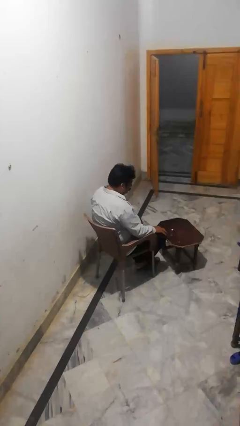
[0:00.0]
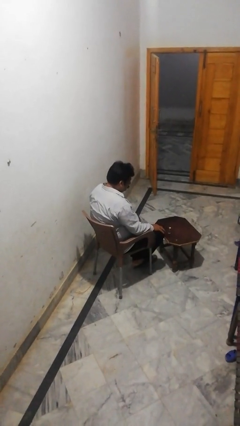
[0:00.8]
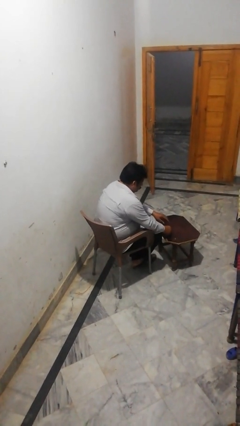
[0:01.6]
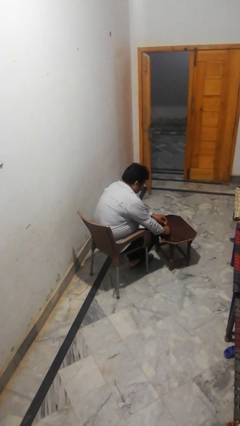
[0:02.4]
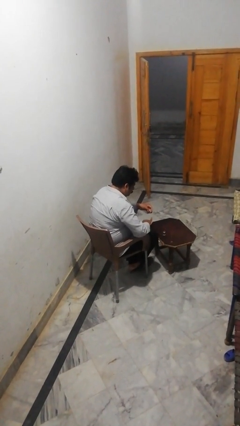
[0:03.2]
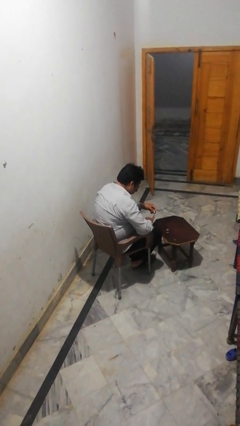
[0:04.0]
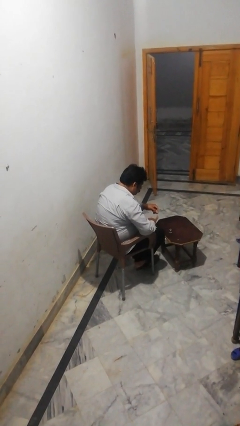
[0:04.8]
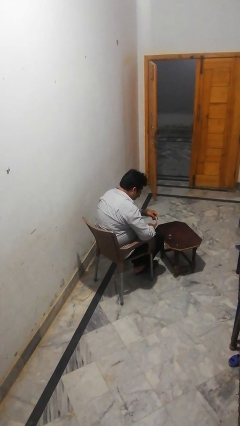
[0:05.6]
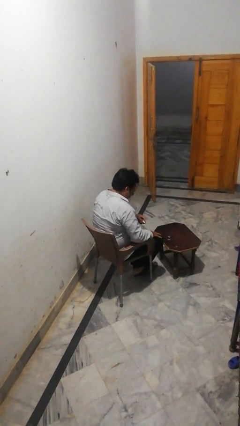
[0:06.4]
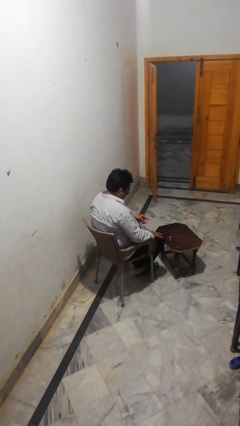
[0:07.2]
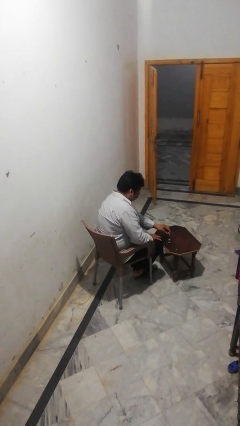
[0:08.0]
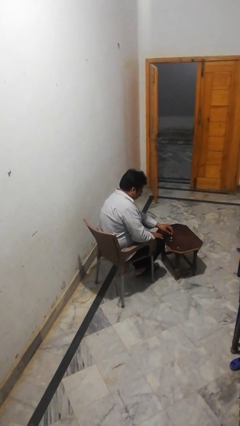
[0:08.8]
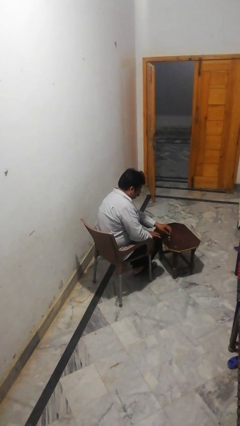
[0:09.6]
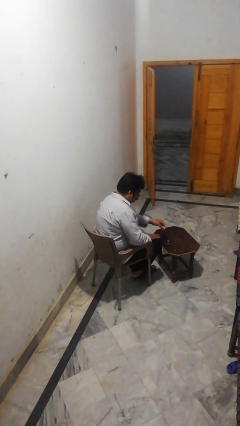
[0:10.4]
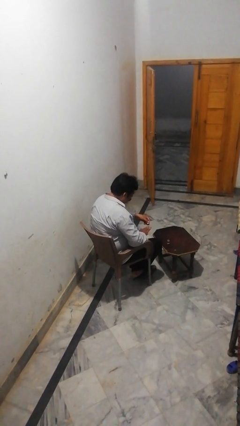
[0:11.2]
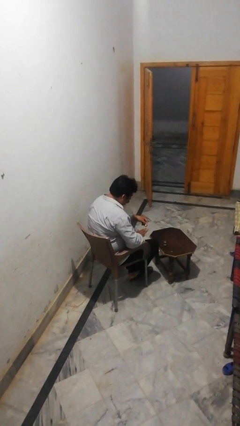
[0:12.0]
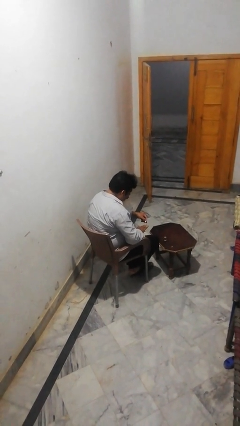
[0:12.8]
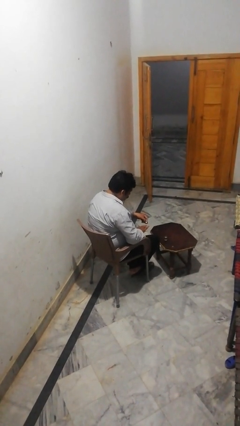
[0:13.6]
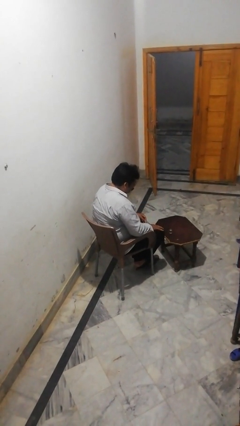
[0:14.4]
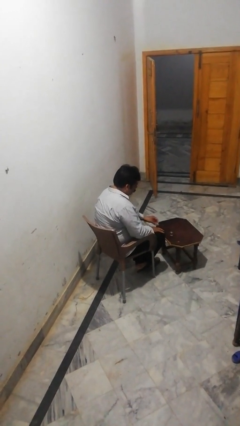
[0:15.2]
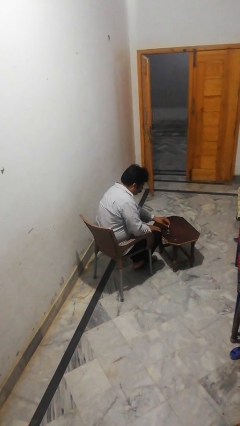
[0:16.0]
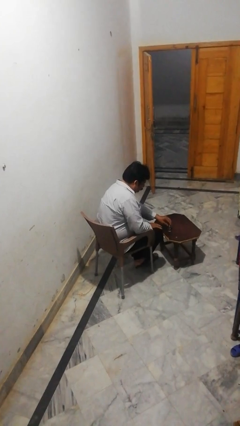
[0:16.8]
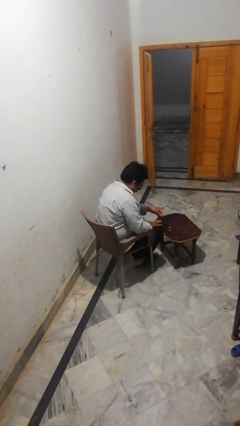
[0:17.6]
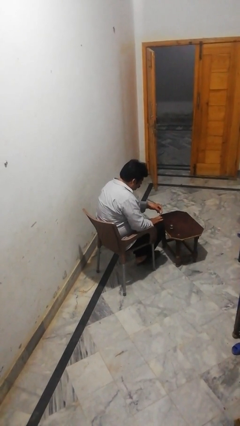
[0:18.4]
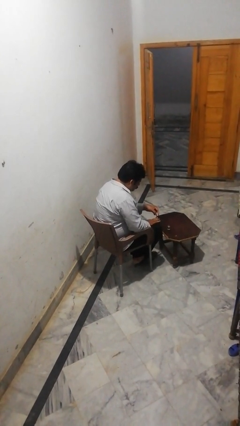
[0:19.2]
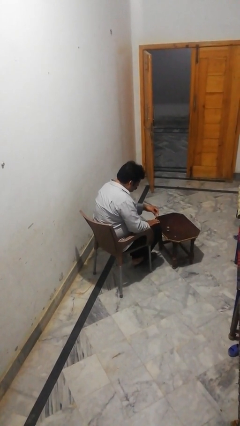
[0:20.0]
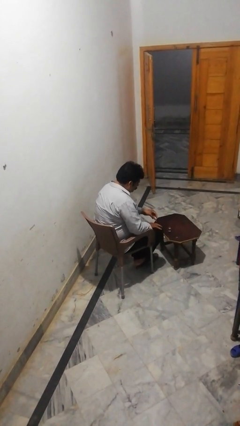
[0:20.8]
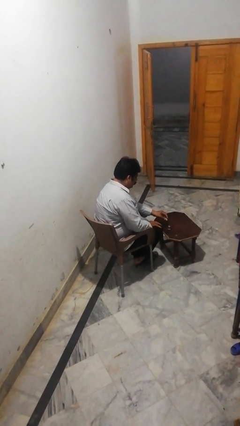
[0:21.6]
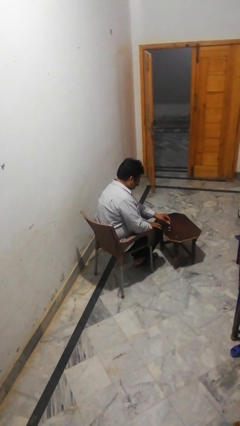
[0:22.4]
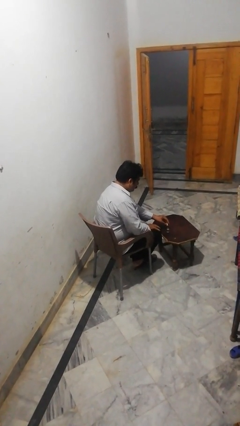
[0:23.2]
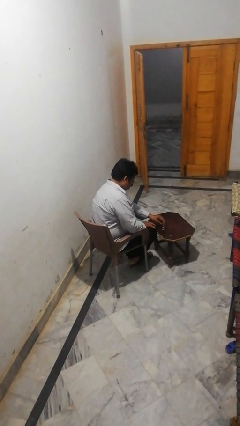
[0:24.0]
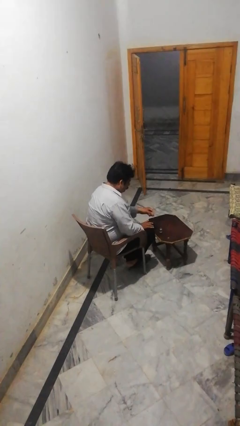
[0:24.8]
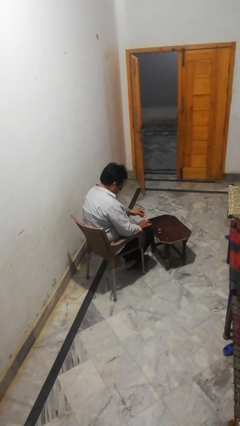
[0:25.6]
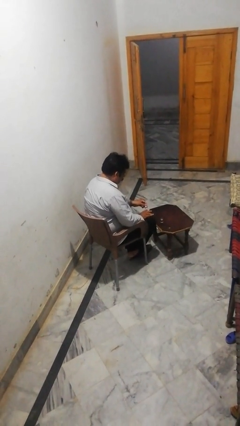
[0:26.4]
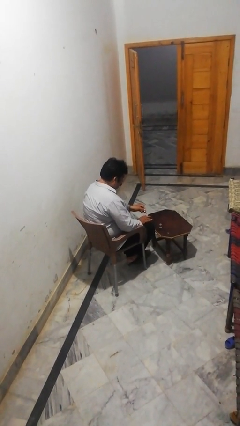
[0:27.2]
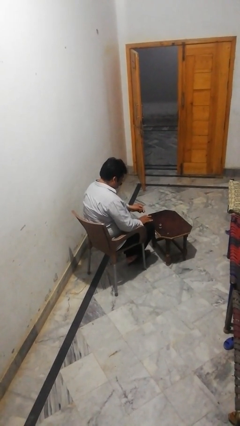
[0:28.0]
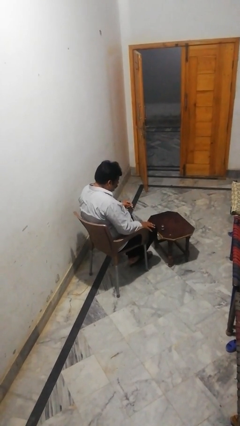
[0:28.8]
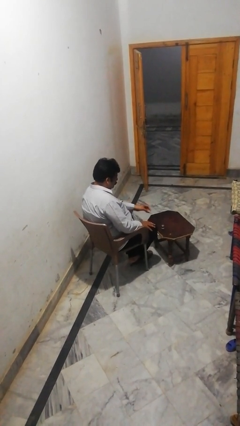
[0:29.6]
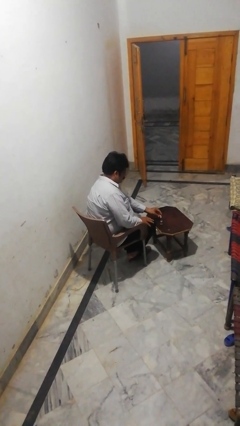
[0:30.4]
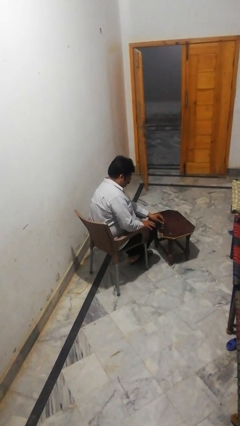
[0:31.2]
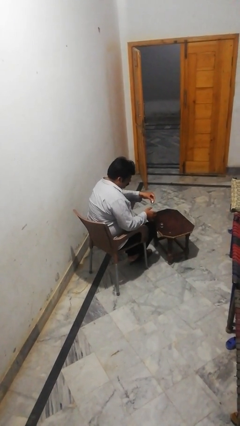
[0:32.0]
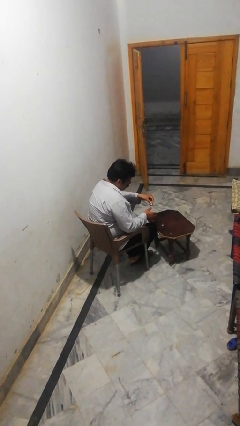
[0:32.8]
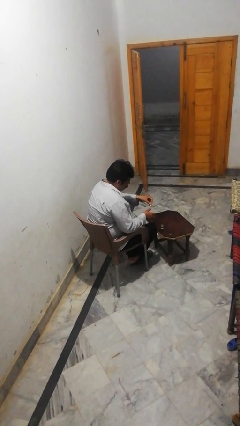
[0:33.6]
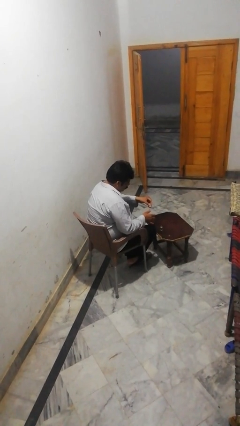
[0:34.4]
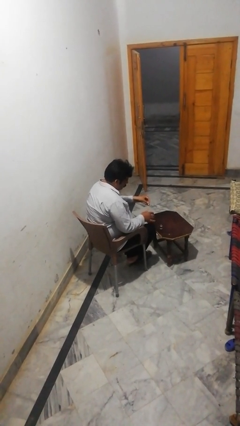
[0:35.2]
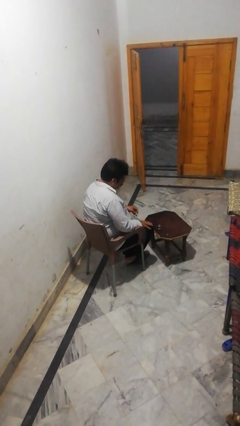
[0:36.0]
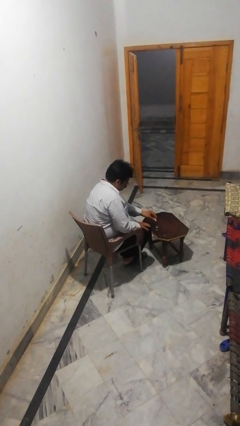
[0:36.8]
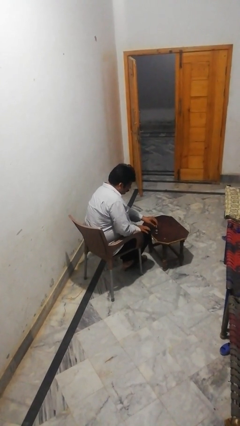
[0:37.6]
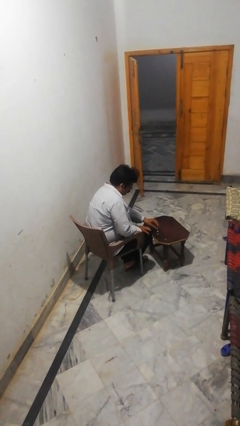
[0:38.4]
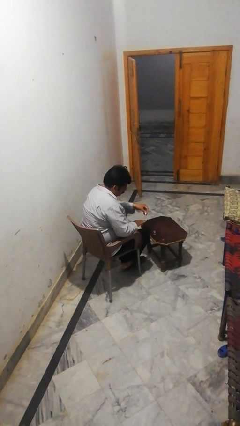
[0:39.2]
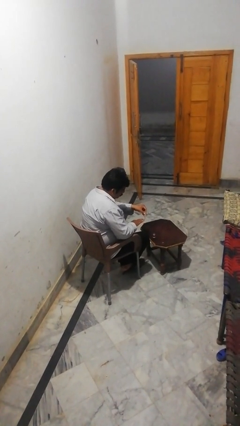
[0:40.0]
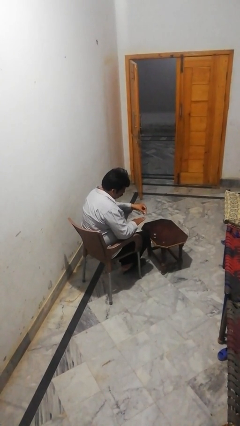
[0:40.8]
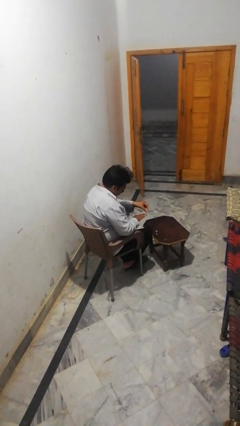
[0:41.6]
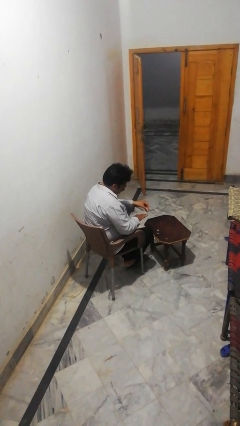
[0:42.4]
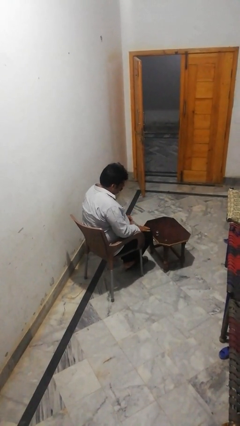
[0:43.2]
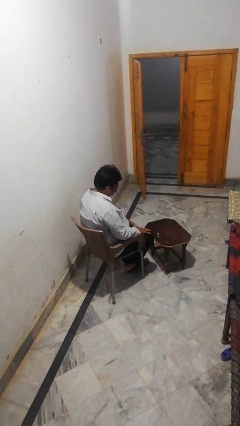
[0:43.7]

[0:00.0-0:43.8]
person paints fingernails

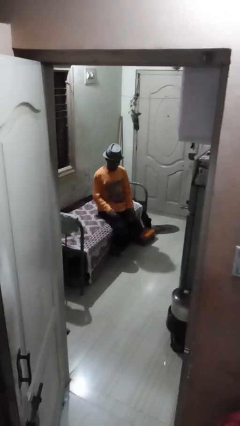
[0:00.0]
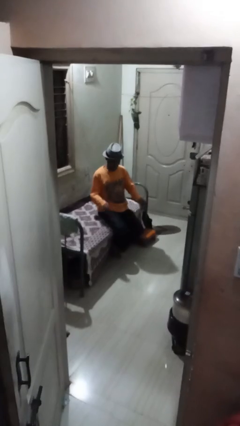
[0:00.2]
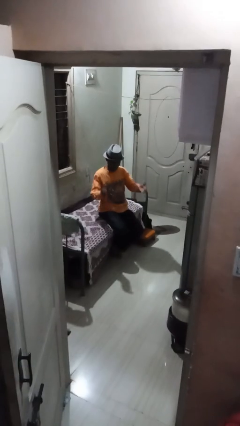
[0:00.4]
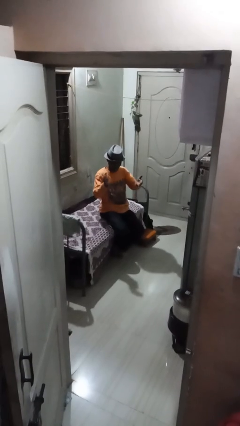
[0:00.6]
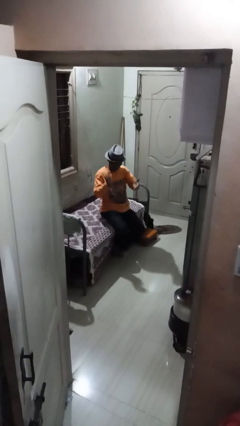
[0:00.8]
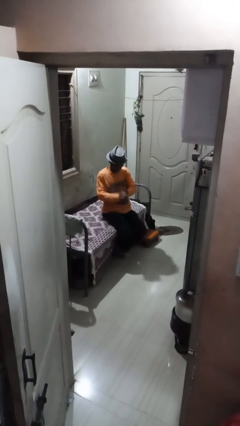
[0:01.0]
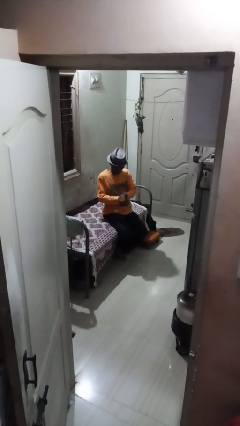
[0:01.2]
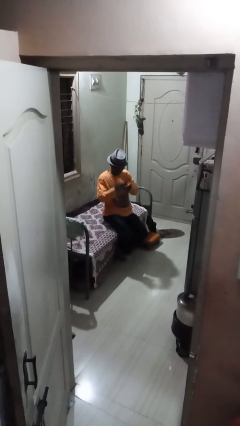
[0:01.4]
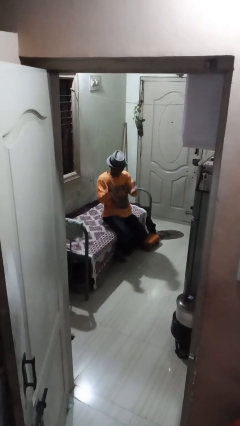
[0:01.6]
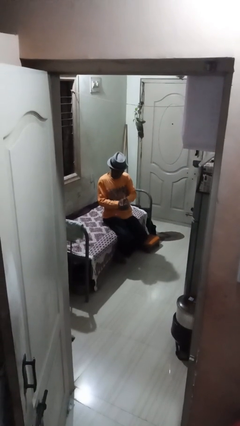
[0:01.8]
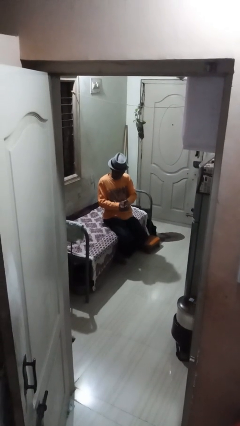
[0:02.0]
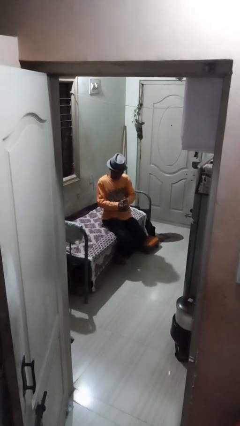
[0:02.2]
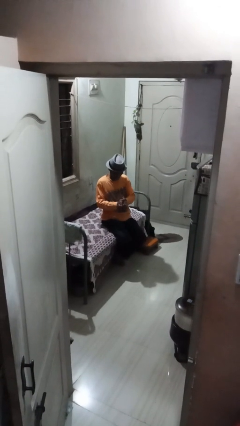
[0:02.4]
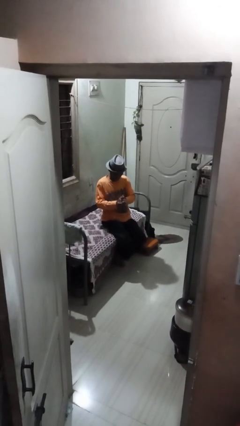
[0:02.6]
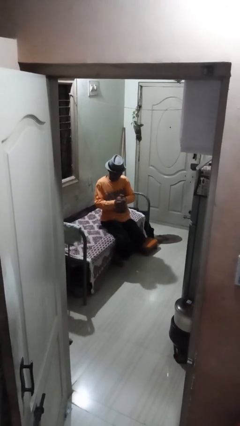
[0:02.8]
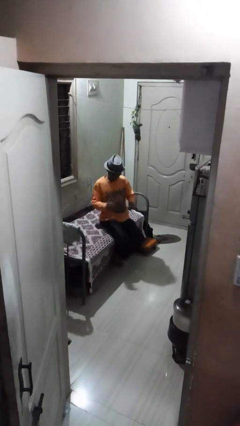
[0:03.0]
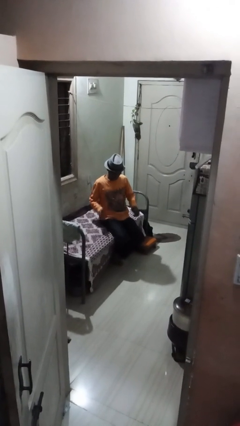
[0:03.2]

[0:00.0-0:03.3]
person claps hands

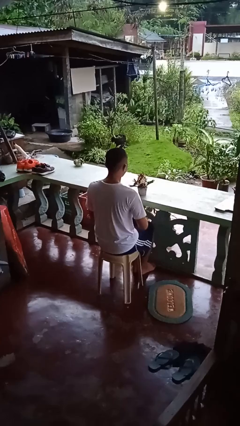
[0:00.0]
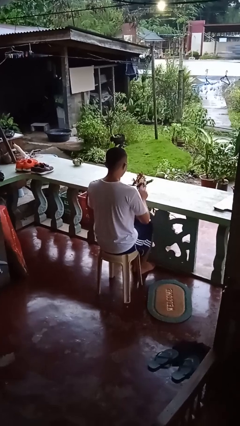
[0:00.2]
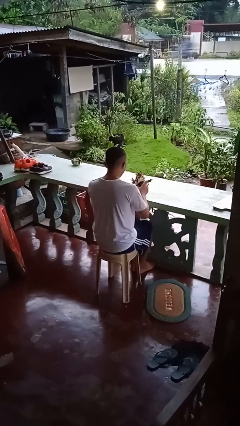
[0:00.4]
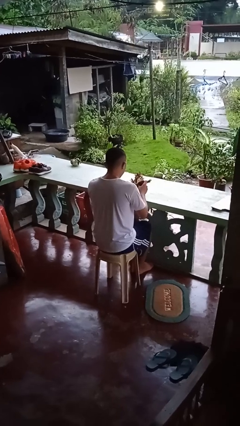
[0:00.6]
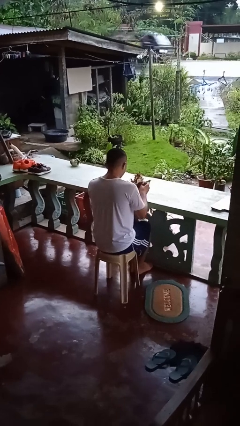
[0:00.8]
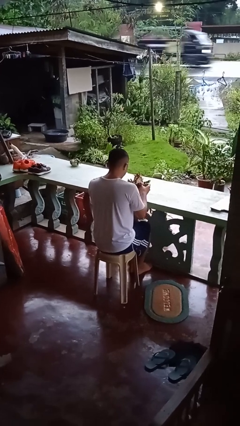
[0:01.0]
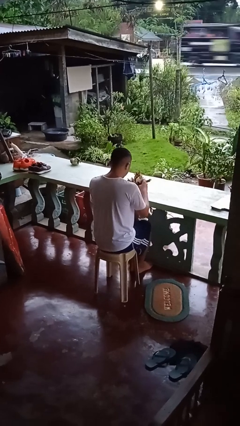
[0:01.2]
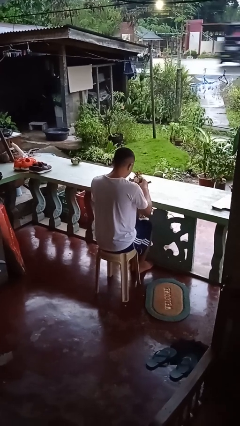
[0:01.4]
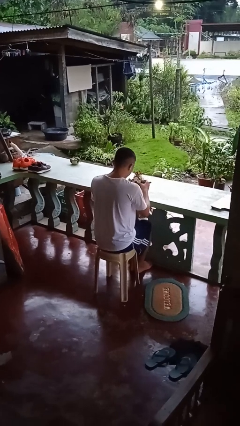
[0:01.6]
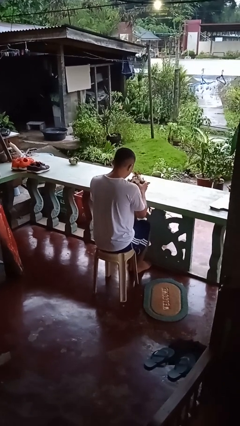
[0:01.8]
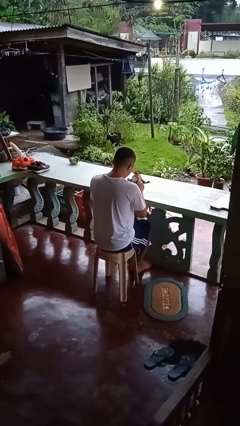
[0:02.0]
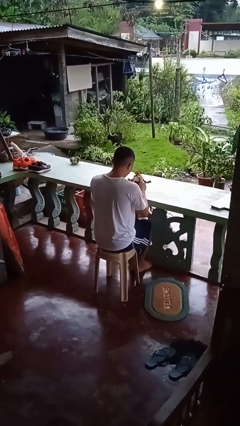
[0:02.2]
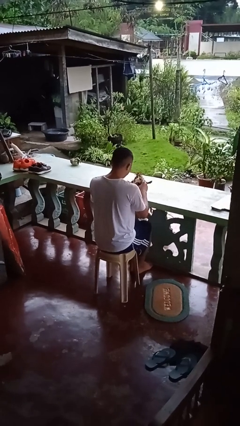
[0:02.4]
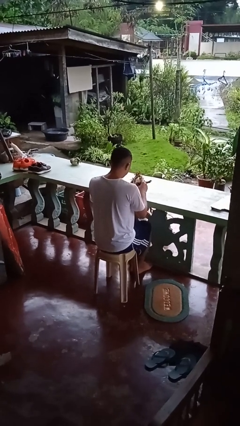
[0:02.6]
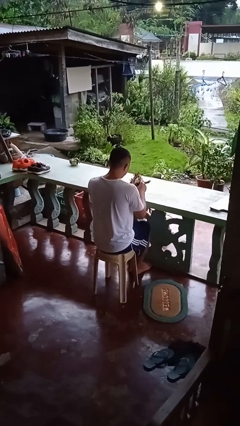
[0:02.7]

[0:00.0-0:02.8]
person arranges flowers in vase

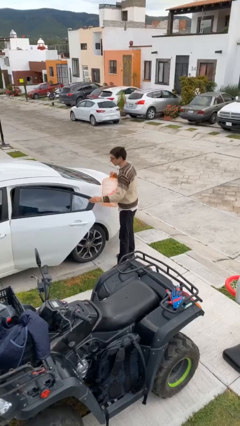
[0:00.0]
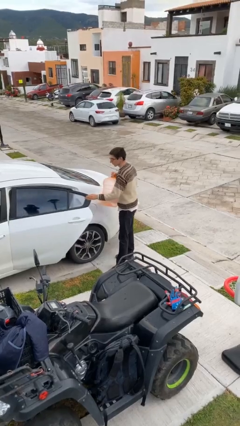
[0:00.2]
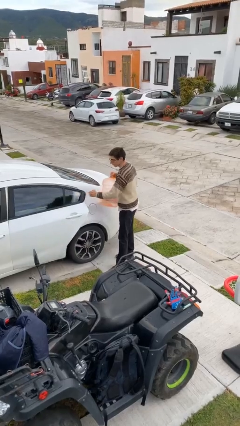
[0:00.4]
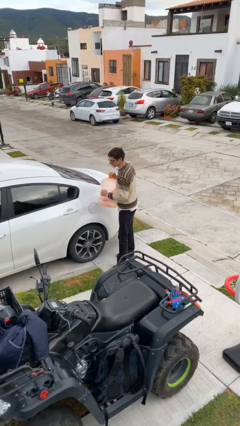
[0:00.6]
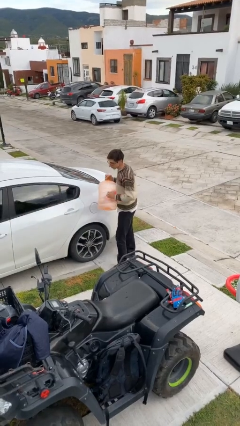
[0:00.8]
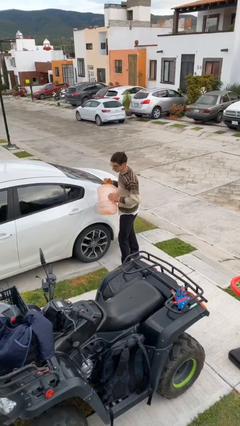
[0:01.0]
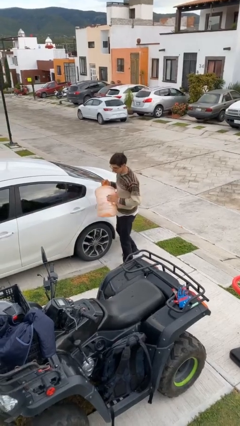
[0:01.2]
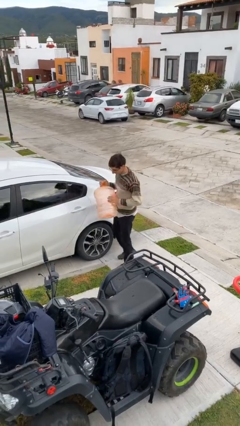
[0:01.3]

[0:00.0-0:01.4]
person closes car door
